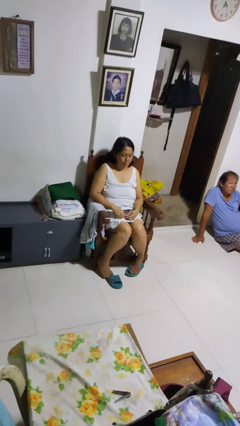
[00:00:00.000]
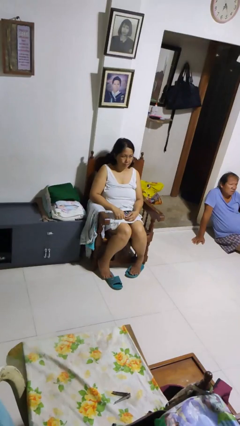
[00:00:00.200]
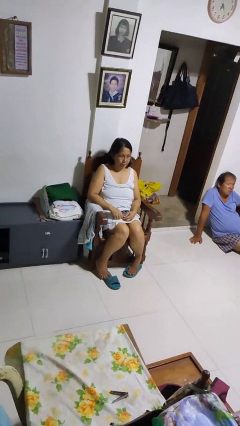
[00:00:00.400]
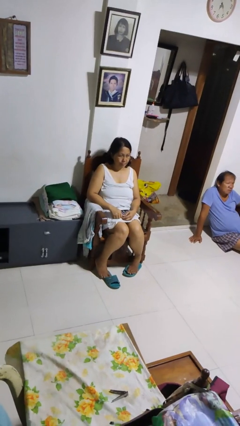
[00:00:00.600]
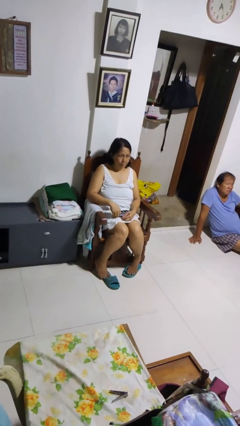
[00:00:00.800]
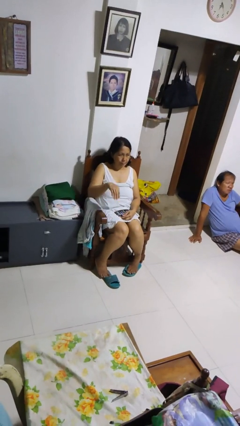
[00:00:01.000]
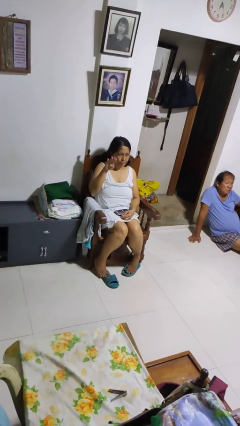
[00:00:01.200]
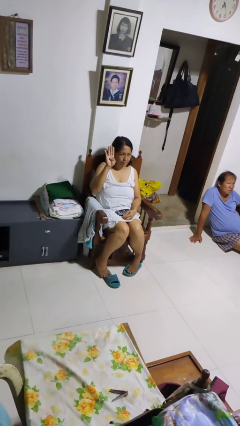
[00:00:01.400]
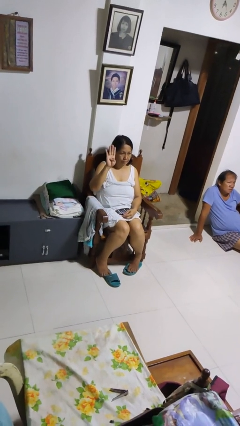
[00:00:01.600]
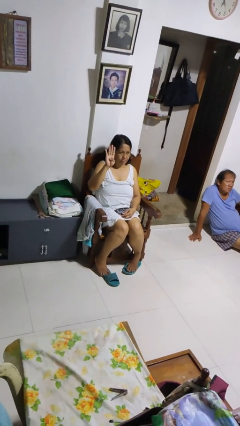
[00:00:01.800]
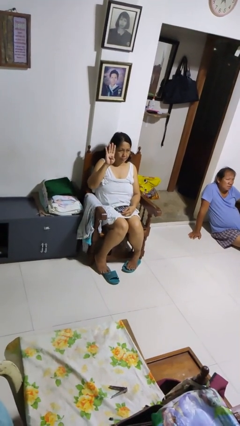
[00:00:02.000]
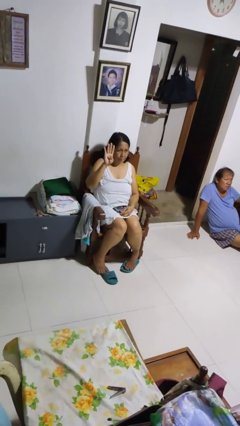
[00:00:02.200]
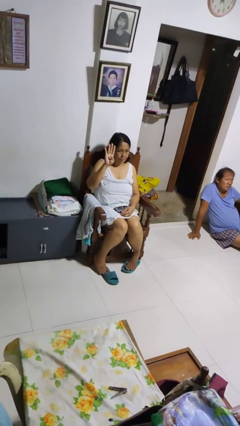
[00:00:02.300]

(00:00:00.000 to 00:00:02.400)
person gestures number four

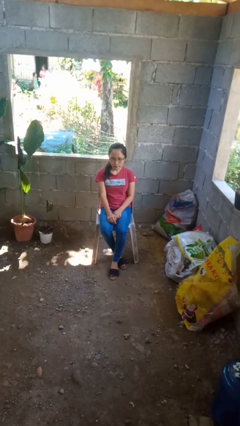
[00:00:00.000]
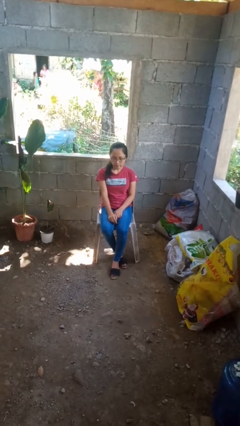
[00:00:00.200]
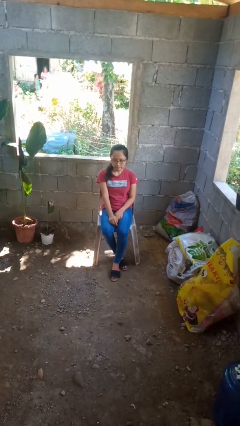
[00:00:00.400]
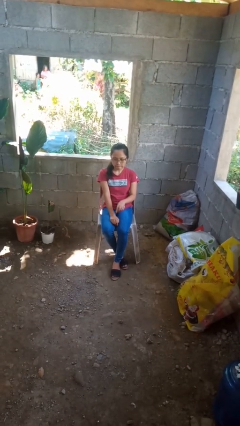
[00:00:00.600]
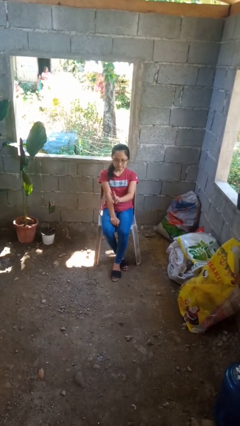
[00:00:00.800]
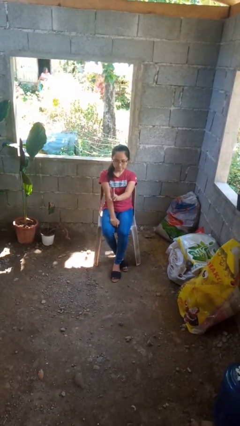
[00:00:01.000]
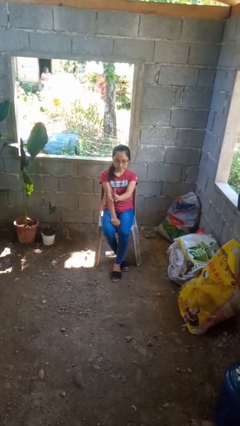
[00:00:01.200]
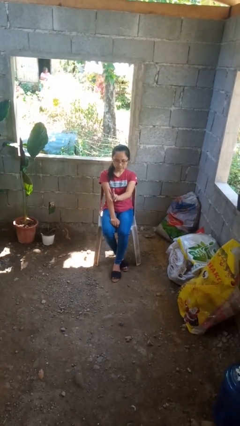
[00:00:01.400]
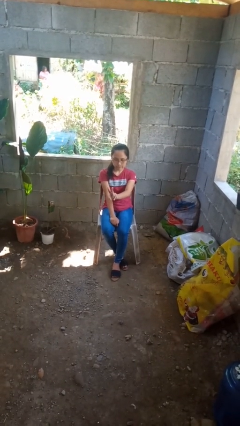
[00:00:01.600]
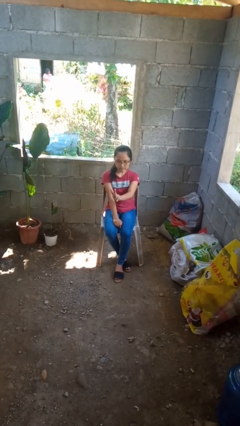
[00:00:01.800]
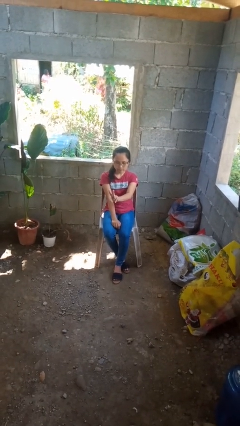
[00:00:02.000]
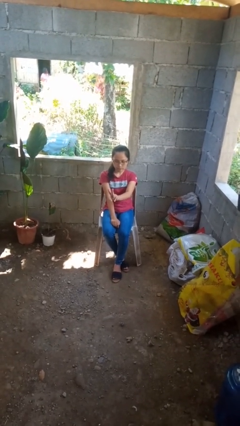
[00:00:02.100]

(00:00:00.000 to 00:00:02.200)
person gestures peace

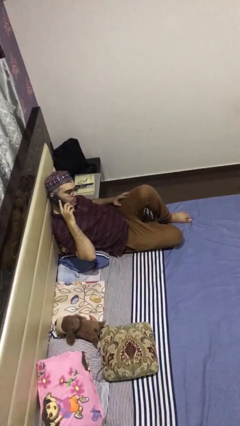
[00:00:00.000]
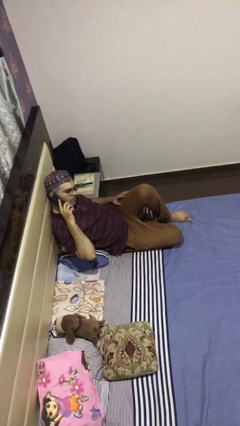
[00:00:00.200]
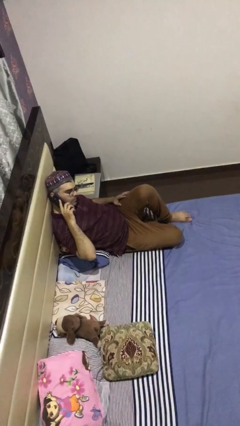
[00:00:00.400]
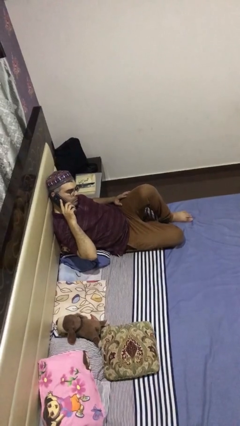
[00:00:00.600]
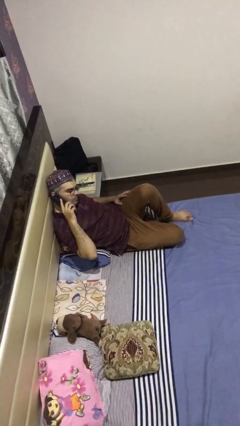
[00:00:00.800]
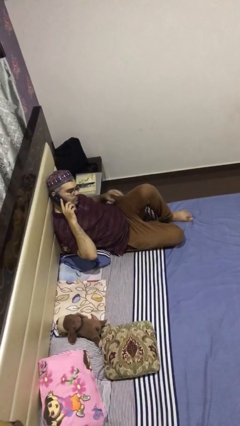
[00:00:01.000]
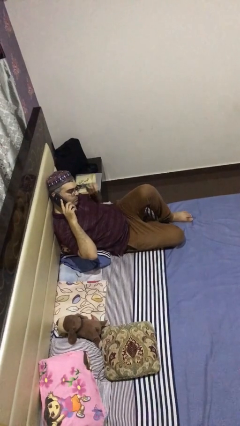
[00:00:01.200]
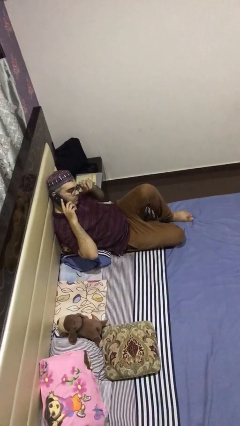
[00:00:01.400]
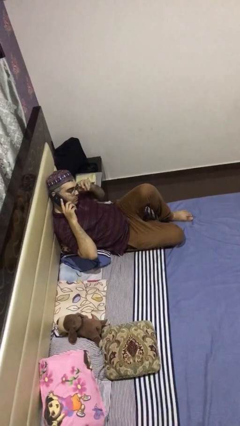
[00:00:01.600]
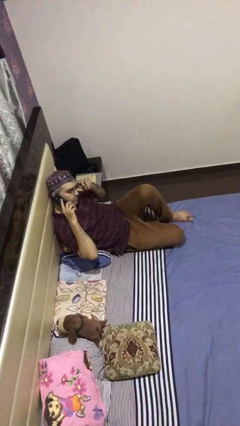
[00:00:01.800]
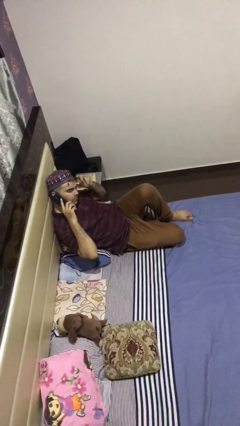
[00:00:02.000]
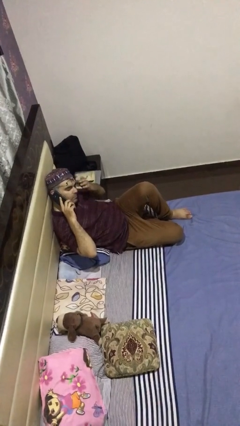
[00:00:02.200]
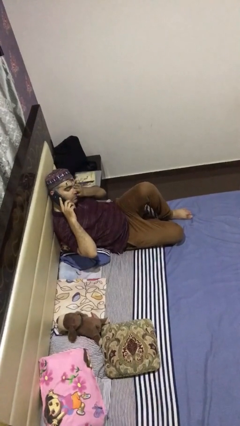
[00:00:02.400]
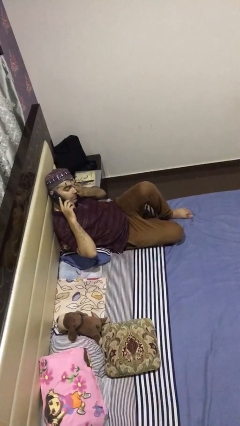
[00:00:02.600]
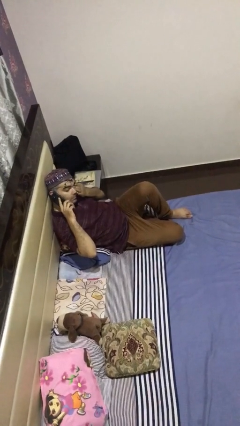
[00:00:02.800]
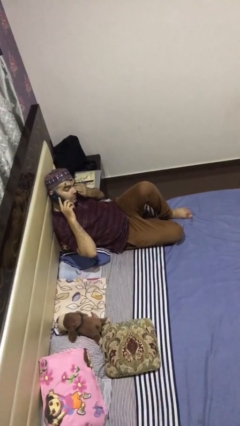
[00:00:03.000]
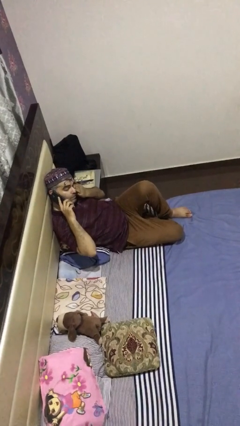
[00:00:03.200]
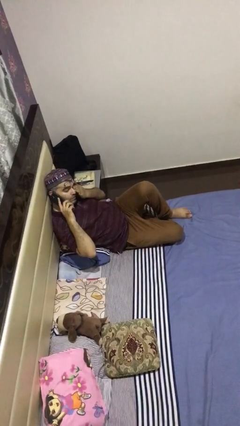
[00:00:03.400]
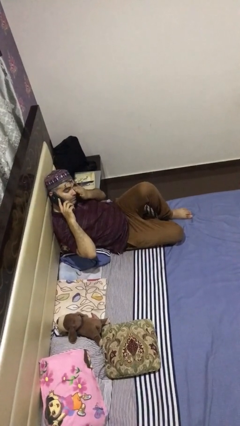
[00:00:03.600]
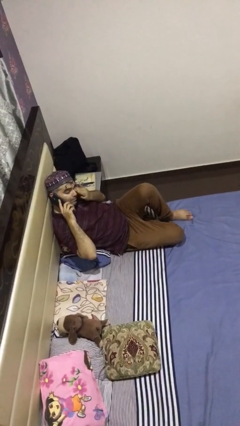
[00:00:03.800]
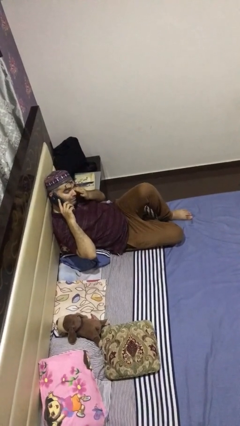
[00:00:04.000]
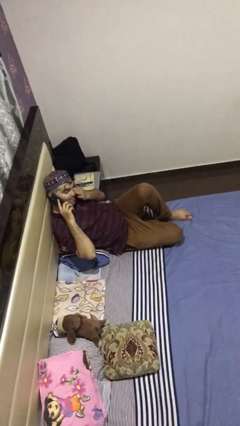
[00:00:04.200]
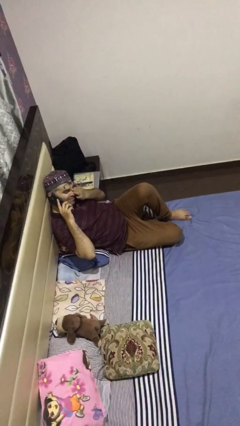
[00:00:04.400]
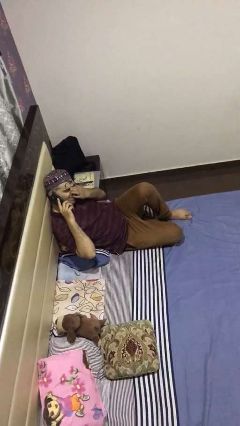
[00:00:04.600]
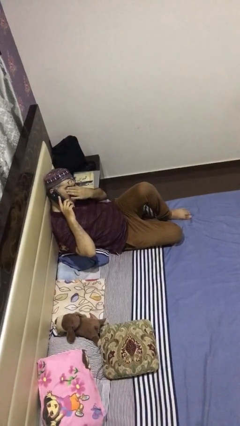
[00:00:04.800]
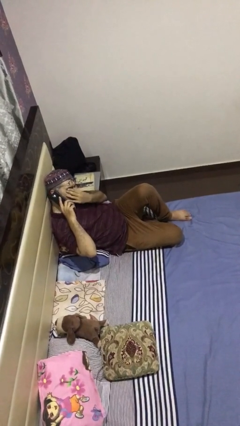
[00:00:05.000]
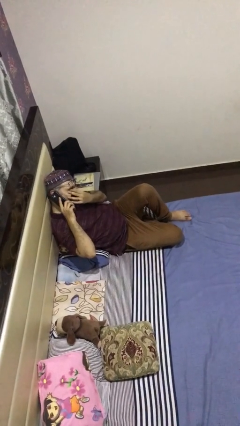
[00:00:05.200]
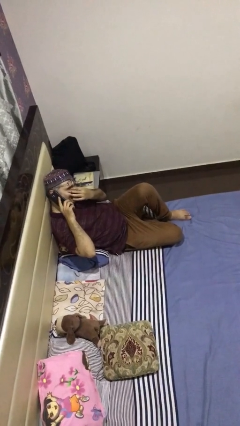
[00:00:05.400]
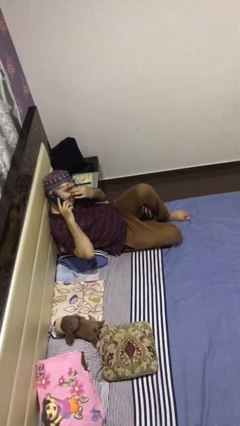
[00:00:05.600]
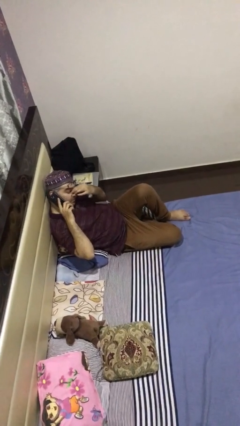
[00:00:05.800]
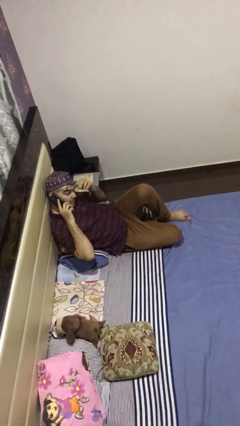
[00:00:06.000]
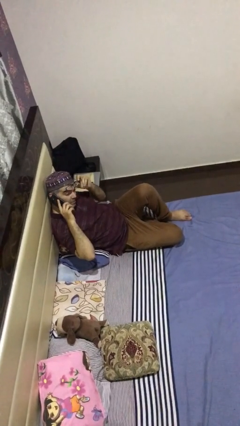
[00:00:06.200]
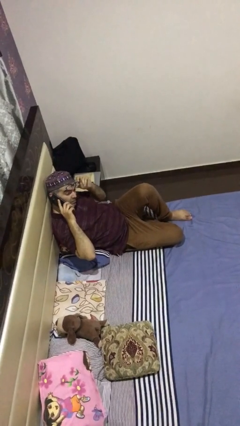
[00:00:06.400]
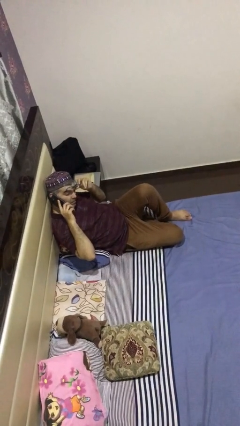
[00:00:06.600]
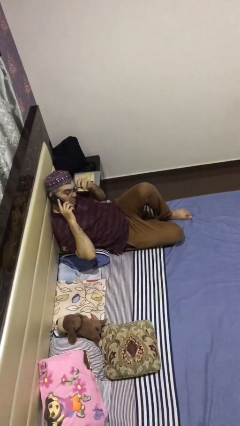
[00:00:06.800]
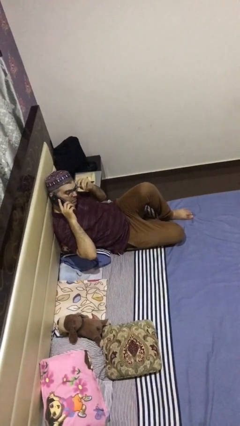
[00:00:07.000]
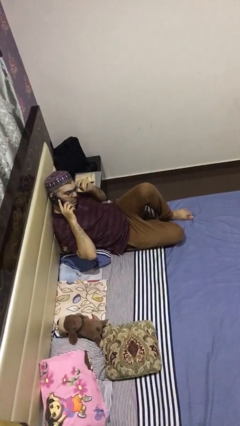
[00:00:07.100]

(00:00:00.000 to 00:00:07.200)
person talks on phone

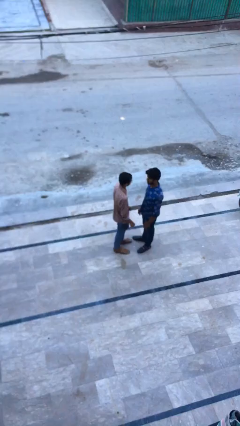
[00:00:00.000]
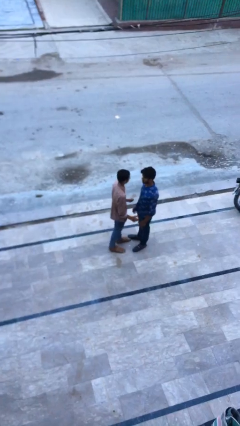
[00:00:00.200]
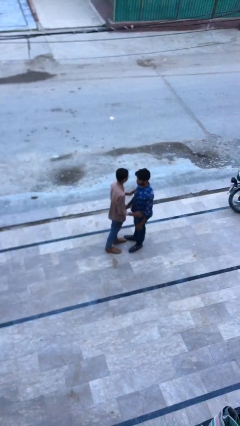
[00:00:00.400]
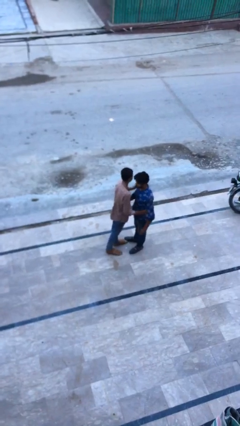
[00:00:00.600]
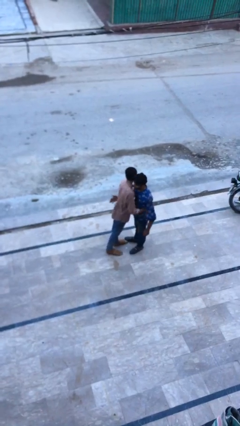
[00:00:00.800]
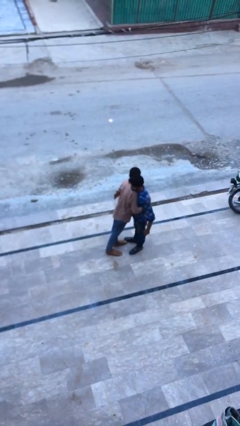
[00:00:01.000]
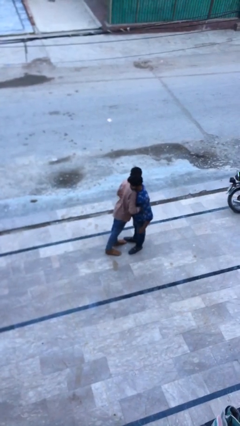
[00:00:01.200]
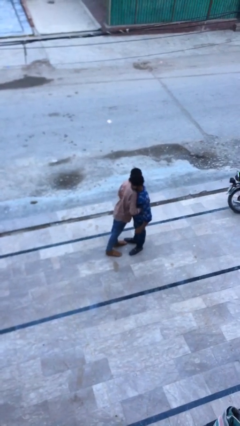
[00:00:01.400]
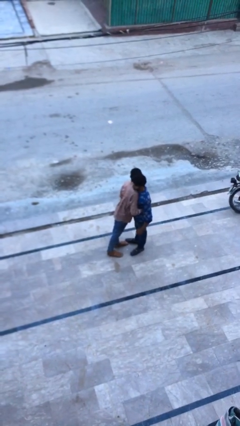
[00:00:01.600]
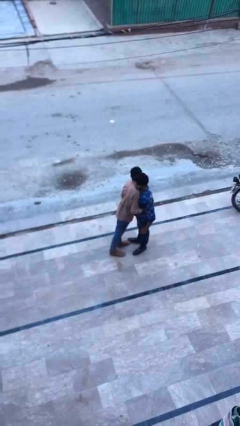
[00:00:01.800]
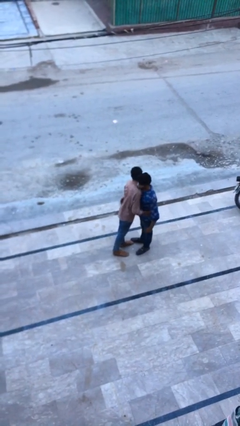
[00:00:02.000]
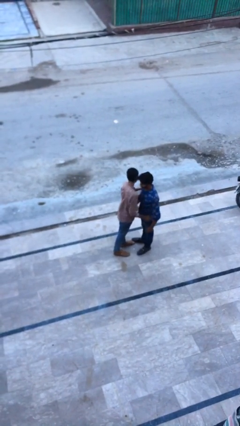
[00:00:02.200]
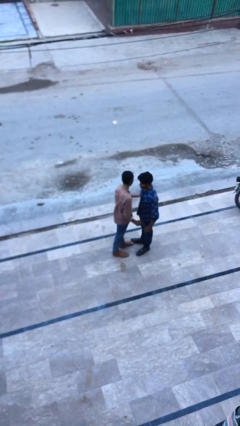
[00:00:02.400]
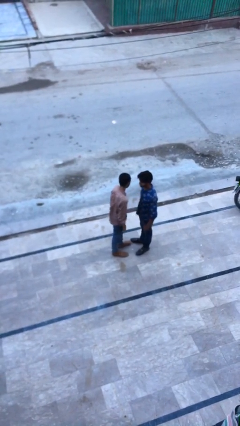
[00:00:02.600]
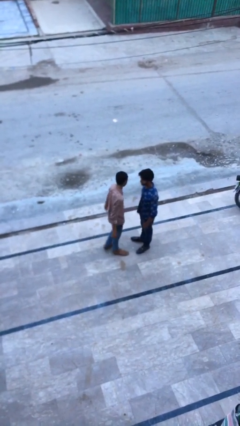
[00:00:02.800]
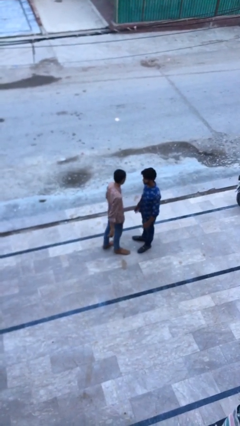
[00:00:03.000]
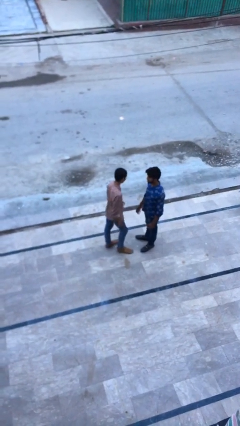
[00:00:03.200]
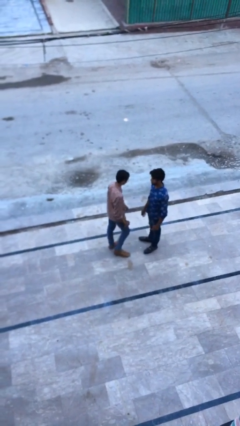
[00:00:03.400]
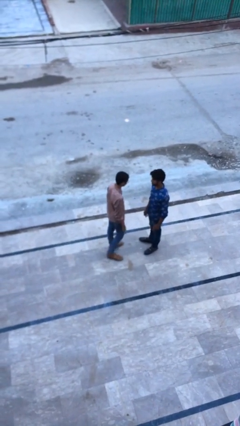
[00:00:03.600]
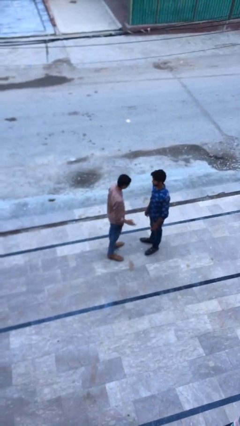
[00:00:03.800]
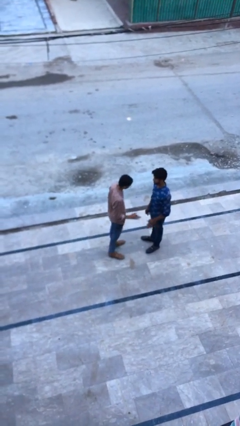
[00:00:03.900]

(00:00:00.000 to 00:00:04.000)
person embraces person

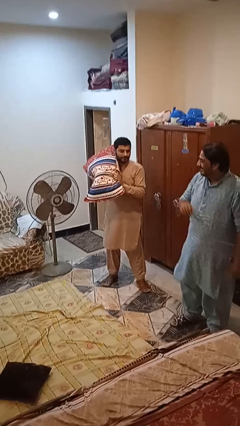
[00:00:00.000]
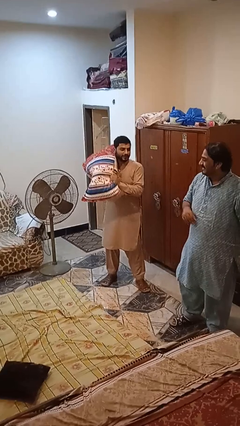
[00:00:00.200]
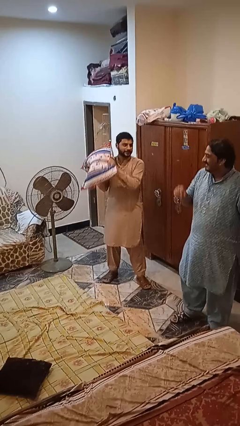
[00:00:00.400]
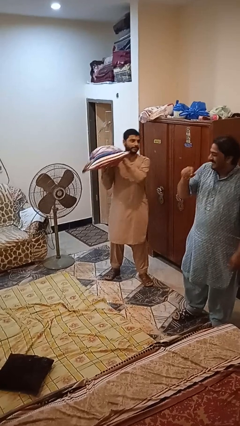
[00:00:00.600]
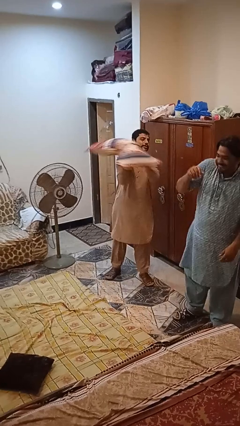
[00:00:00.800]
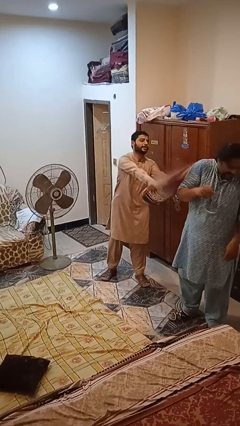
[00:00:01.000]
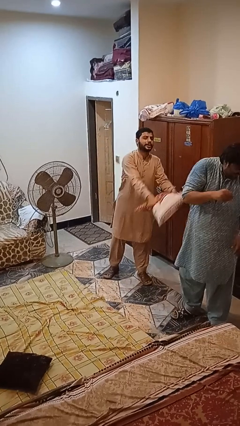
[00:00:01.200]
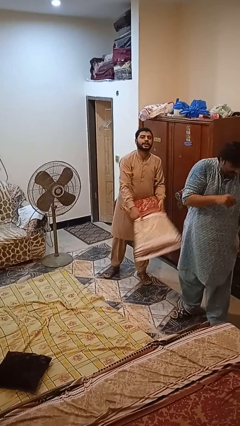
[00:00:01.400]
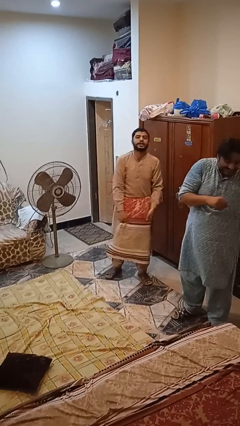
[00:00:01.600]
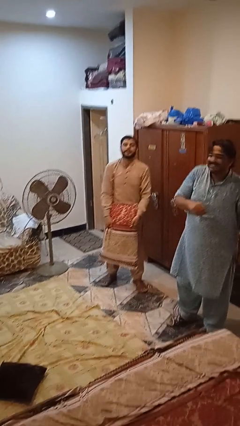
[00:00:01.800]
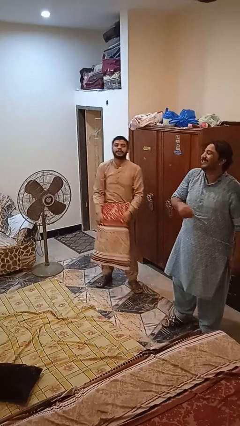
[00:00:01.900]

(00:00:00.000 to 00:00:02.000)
person hits person with pillow
